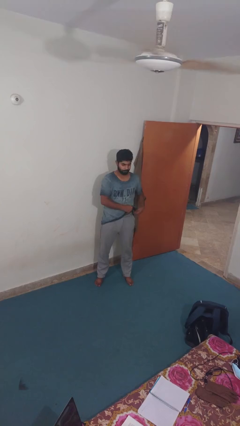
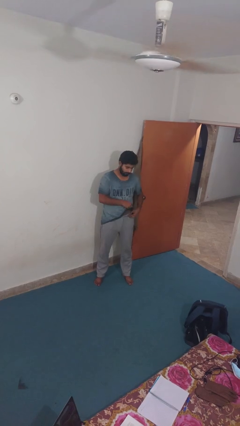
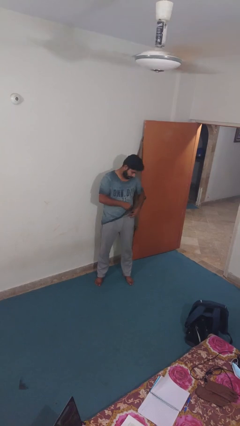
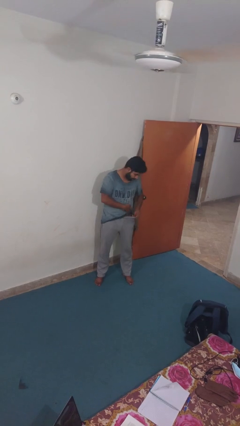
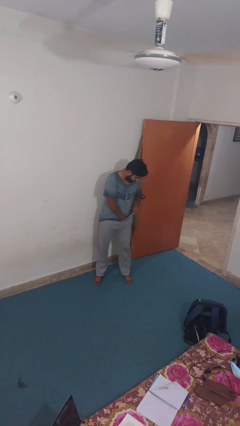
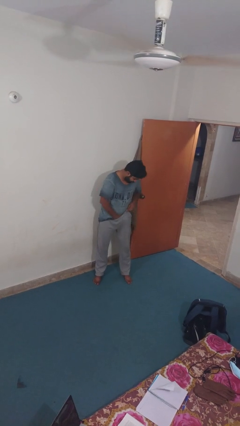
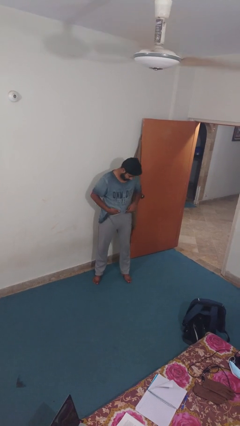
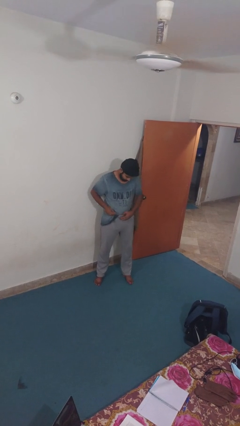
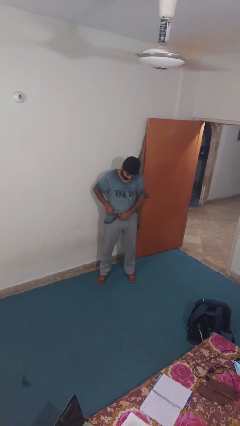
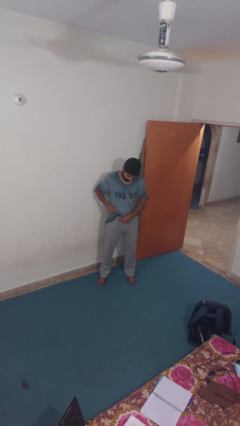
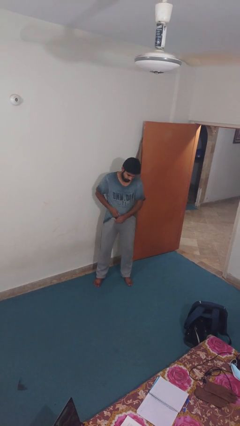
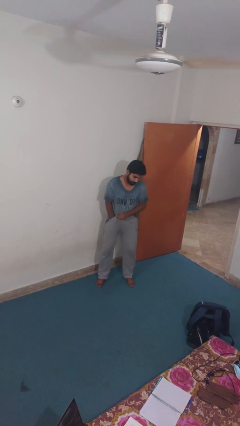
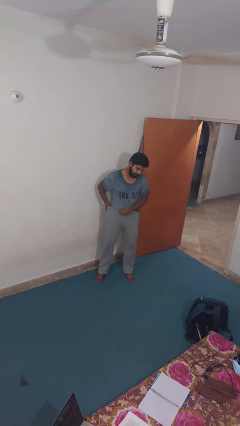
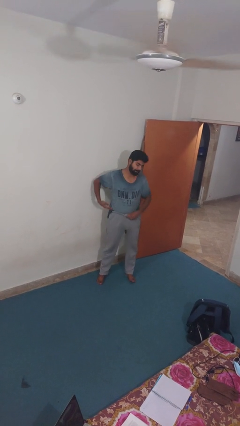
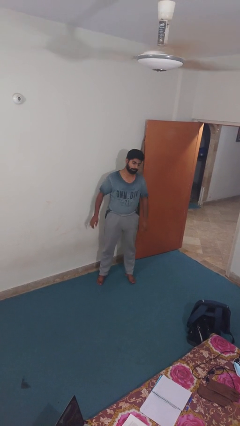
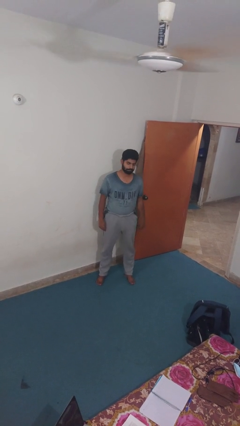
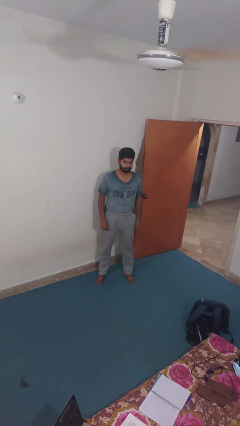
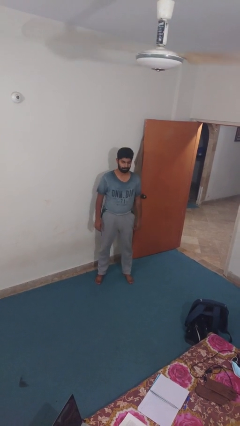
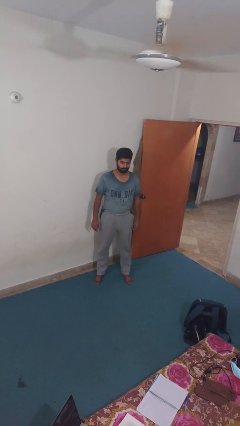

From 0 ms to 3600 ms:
person tucks in shirt

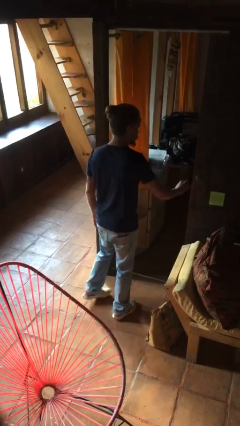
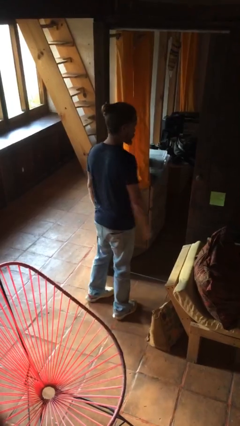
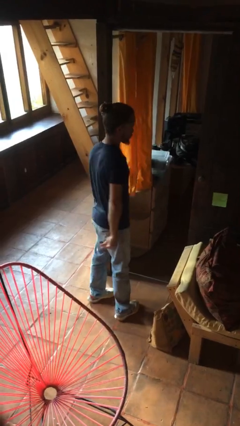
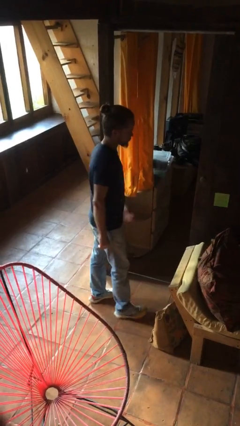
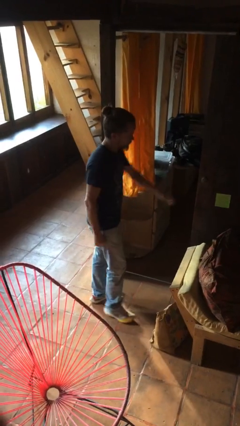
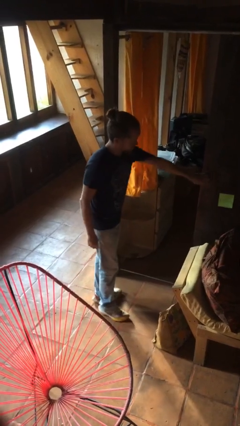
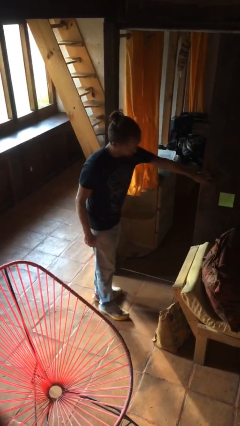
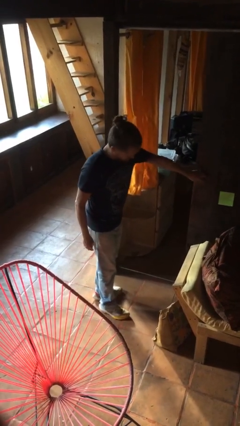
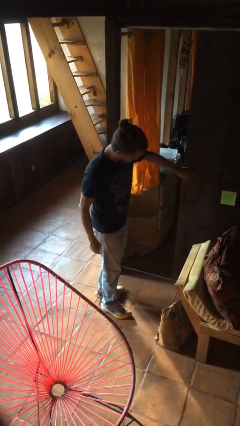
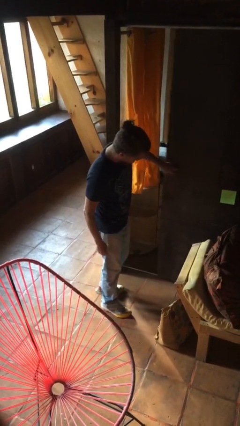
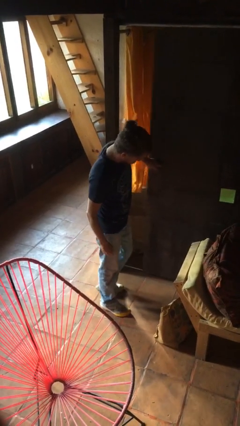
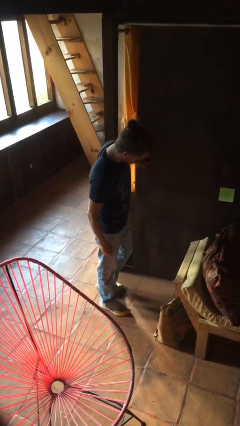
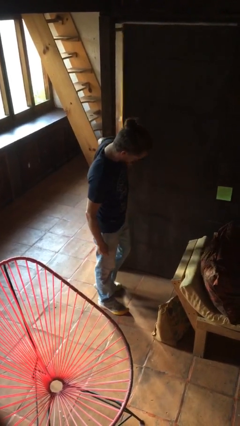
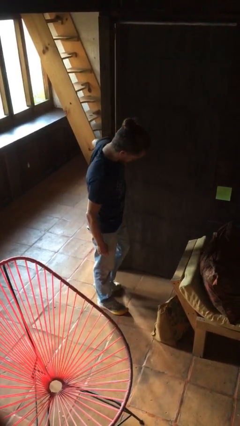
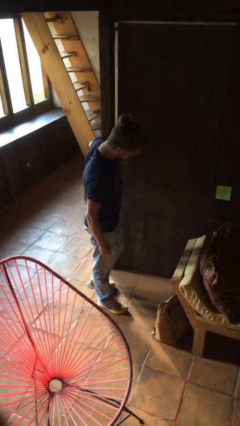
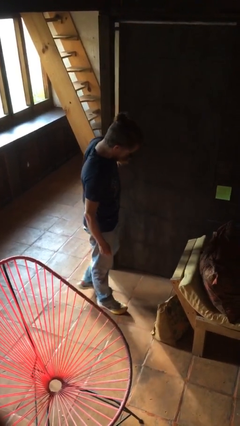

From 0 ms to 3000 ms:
person closes sliding door

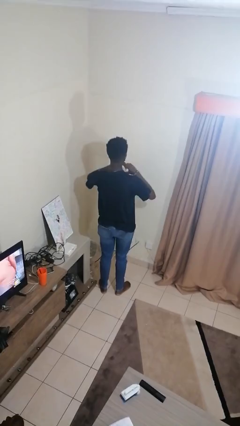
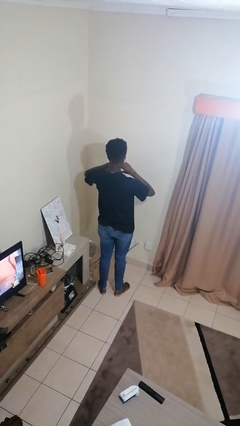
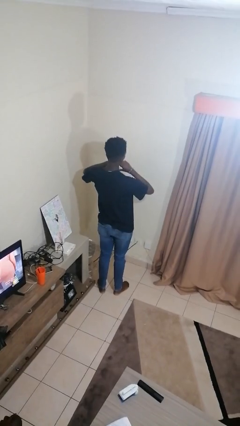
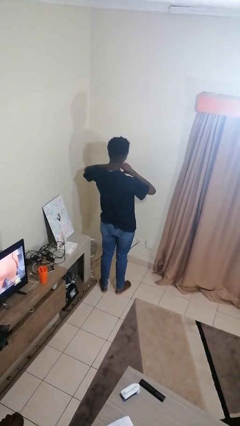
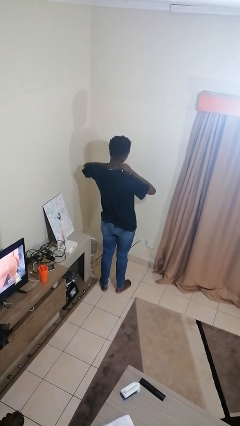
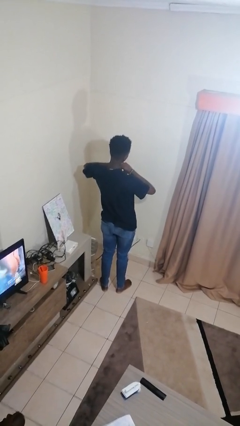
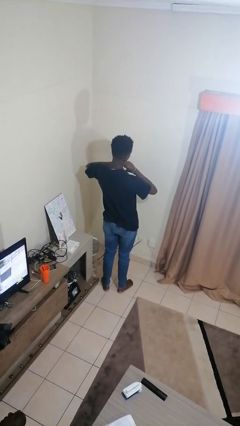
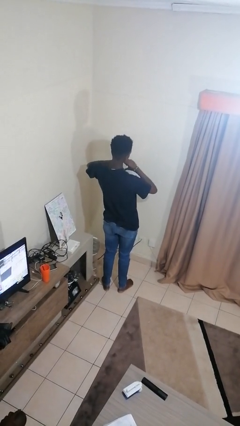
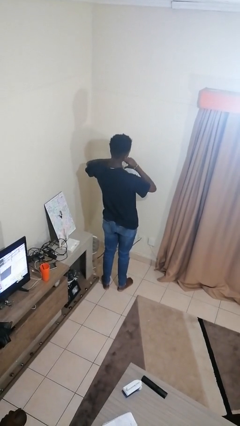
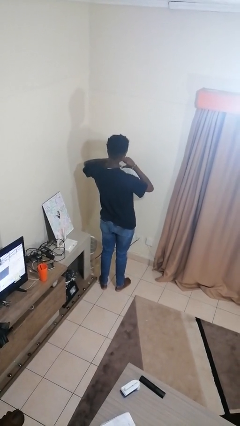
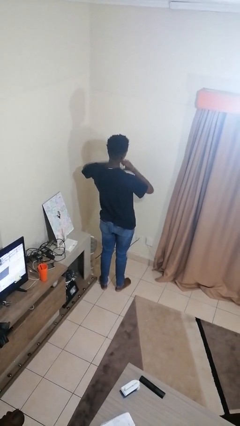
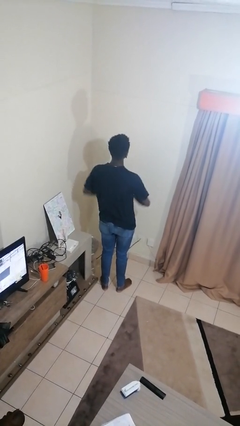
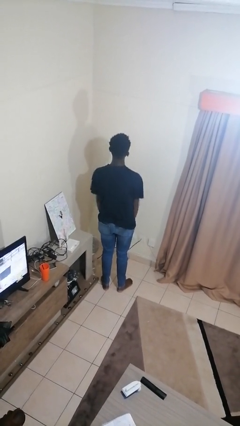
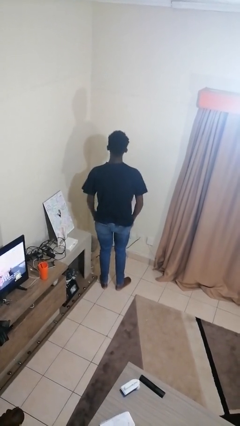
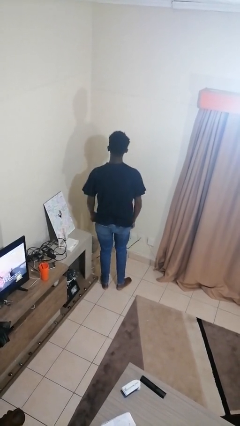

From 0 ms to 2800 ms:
person gestures heart

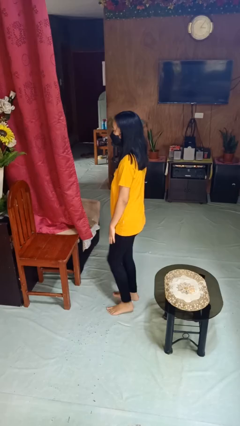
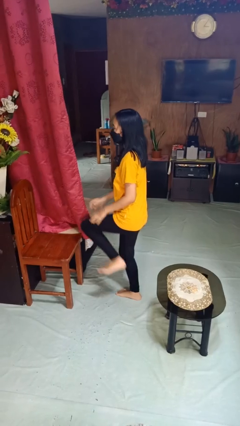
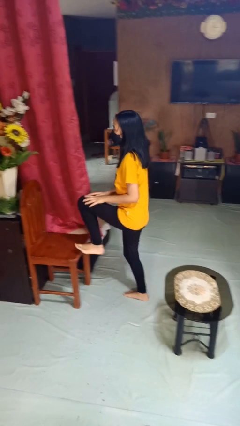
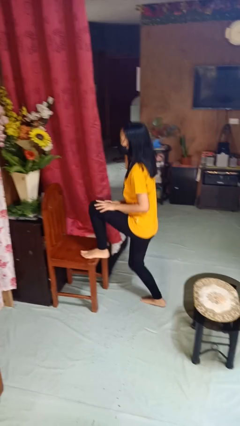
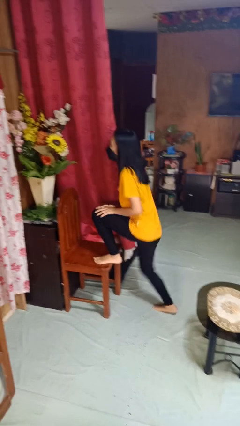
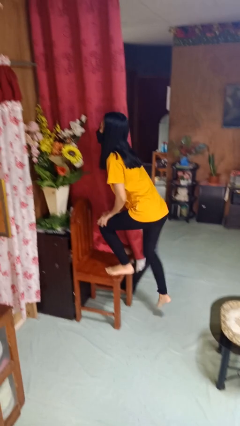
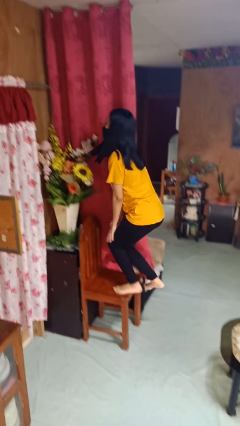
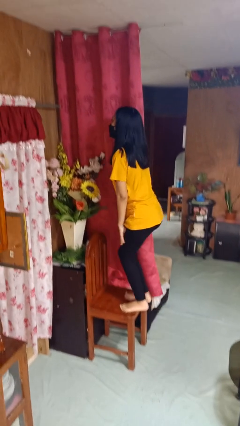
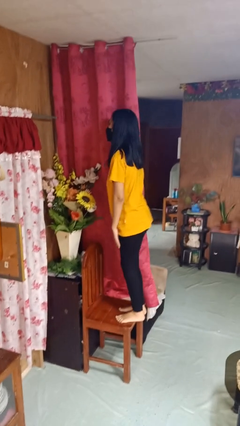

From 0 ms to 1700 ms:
person climbs on chair

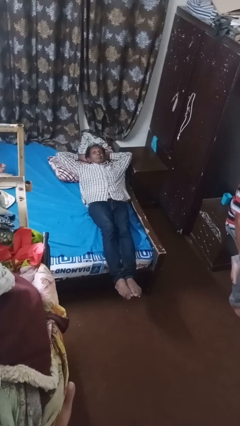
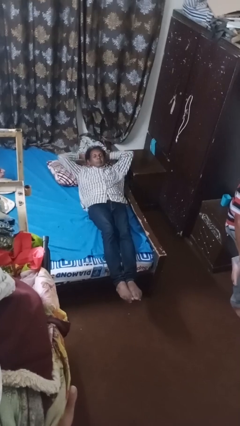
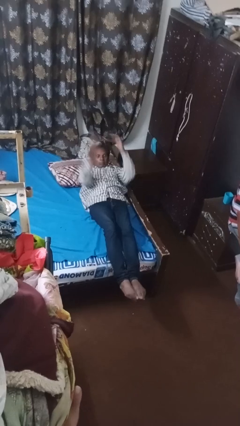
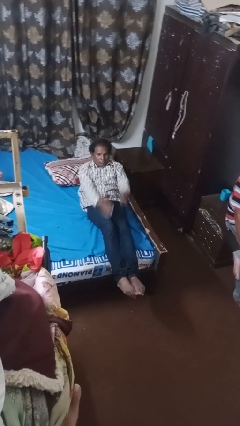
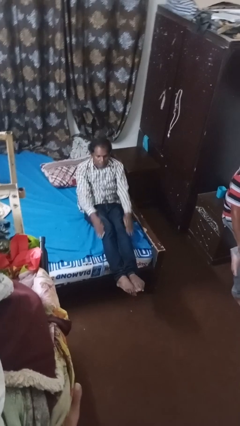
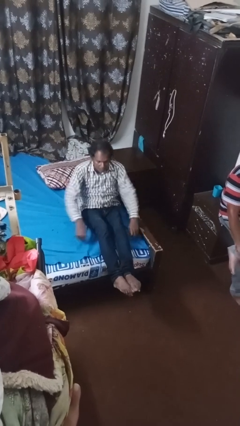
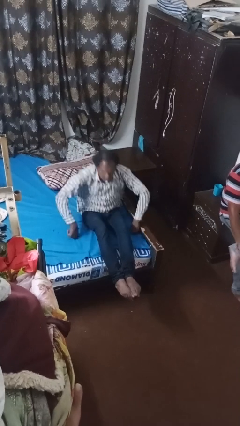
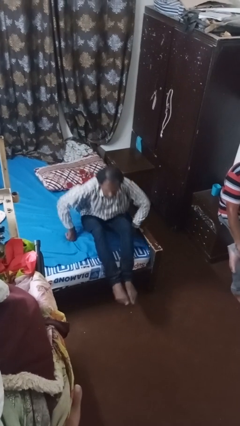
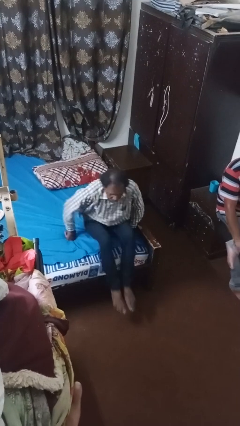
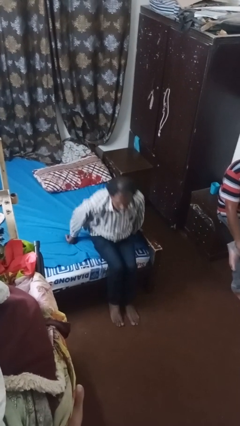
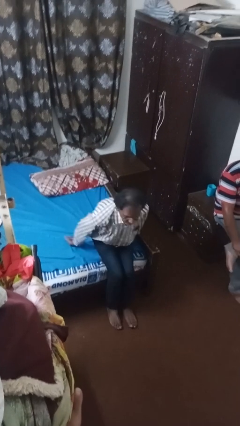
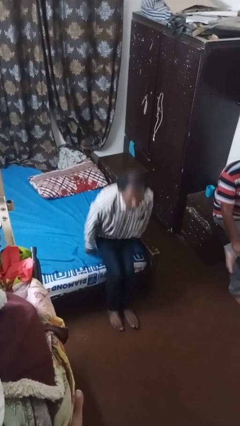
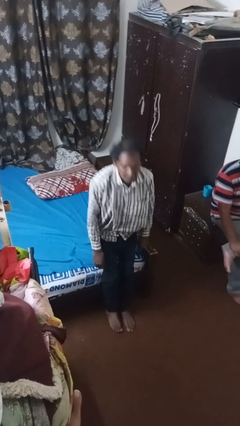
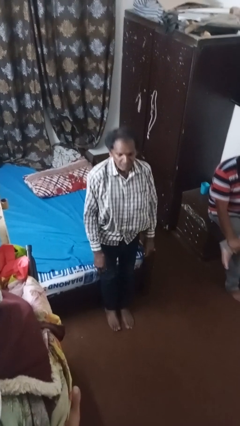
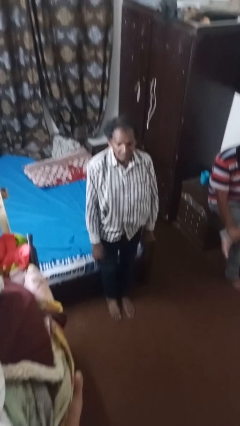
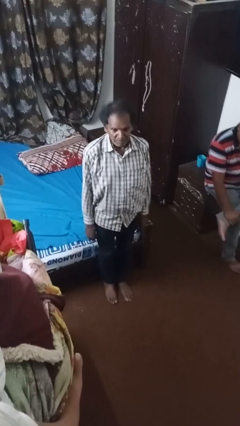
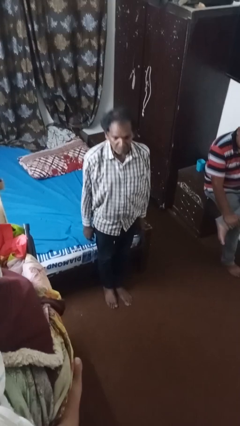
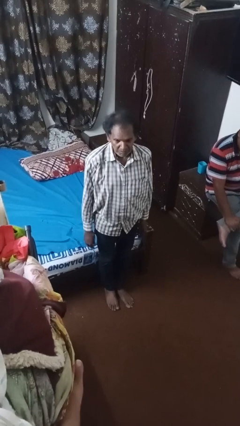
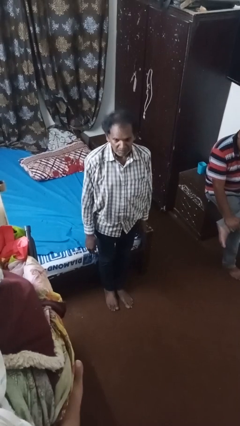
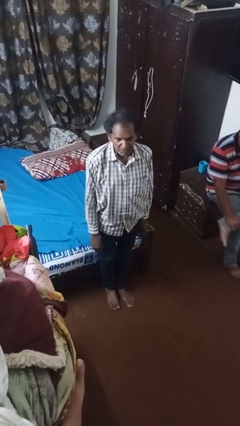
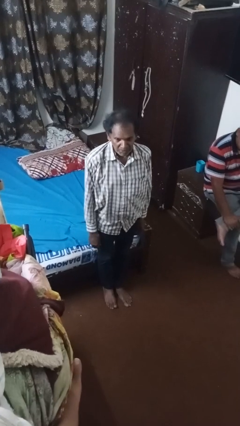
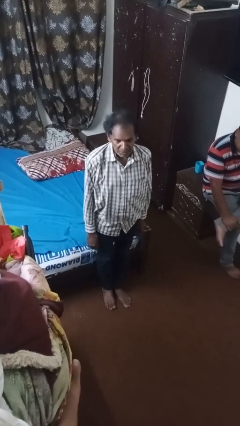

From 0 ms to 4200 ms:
person stands up

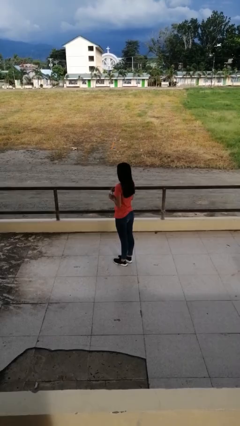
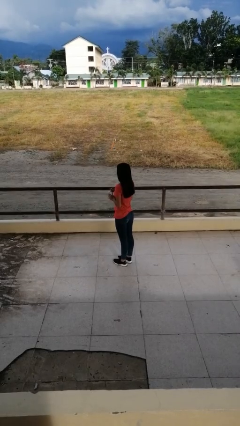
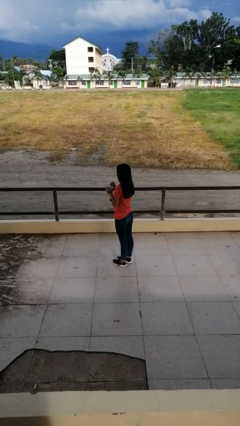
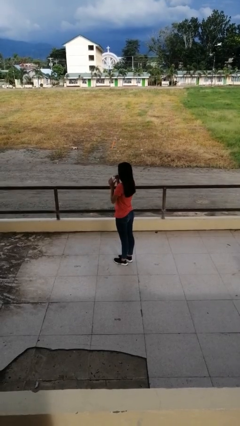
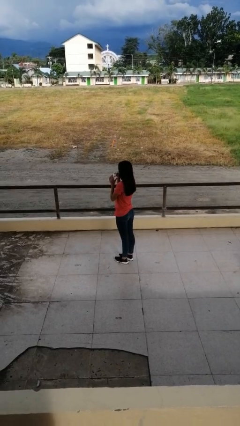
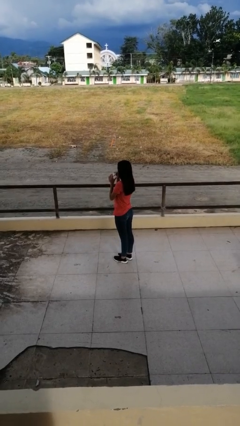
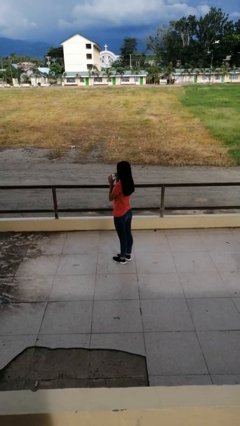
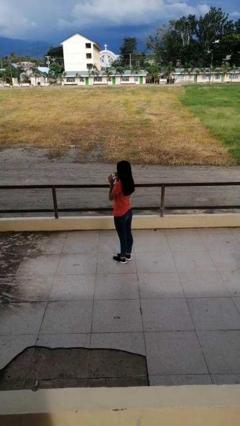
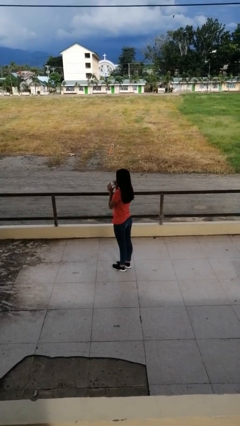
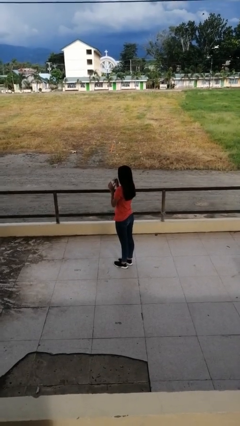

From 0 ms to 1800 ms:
person drinks from straw
